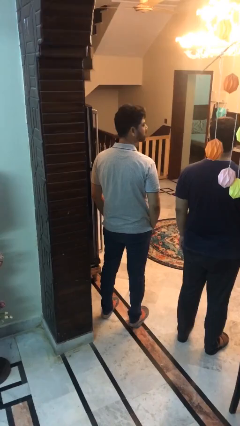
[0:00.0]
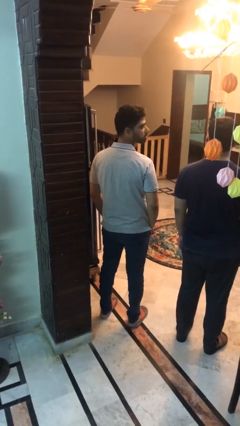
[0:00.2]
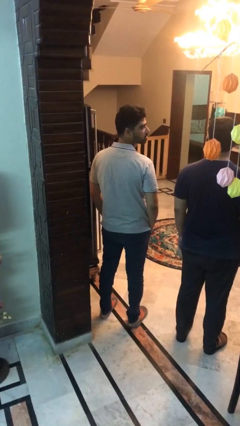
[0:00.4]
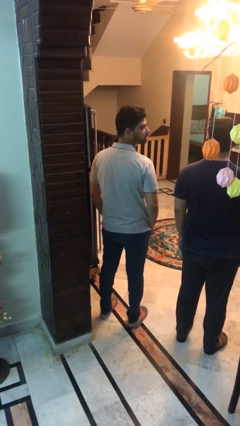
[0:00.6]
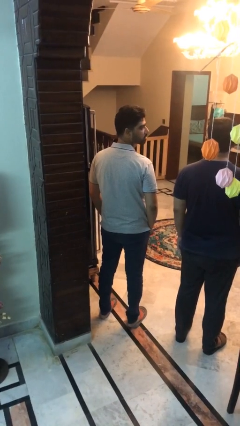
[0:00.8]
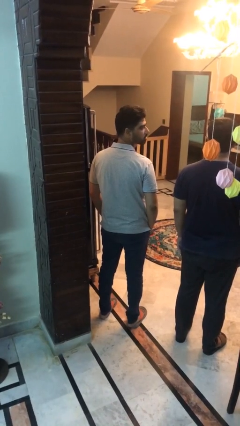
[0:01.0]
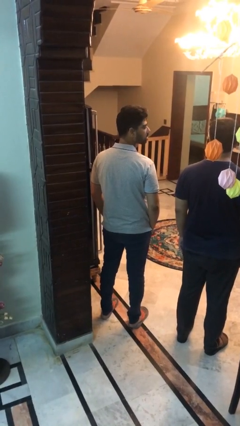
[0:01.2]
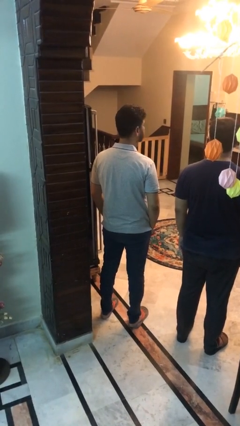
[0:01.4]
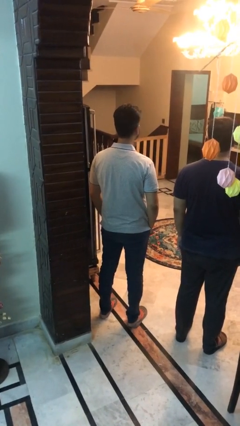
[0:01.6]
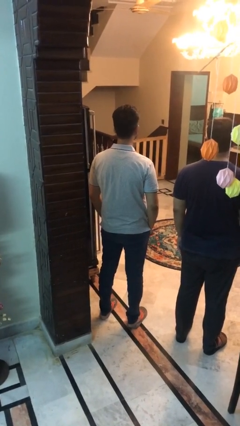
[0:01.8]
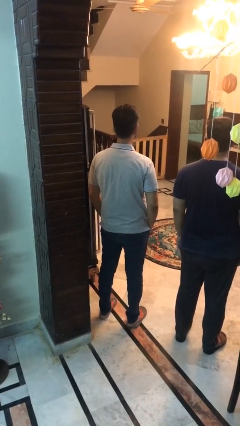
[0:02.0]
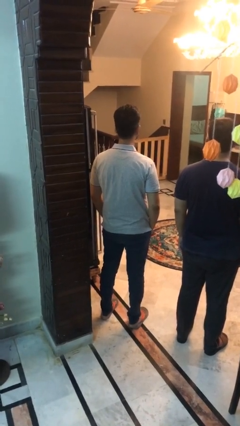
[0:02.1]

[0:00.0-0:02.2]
person looks over shoulder

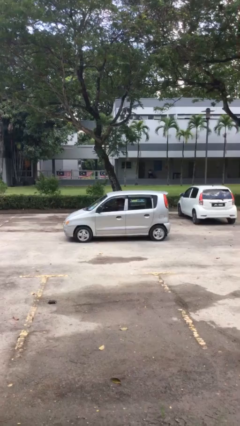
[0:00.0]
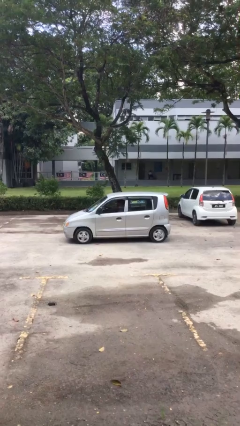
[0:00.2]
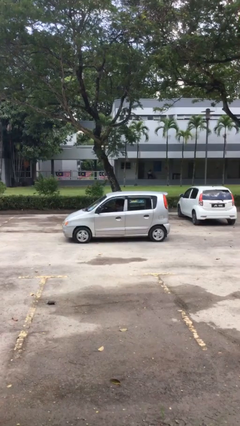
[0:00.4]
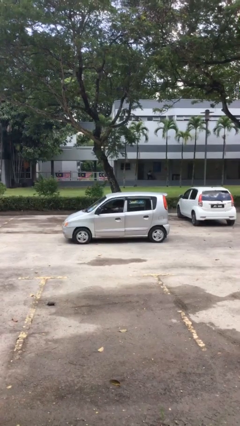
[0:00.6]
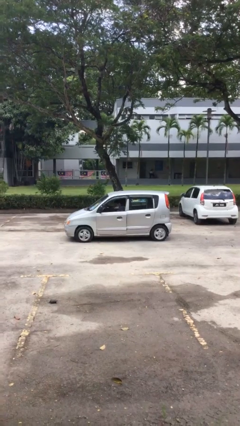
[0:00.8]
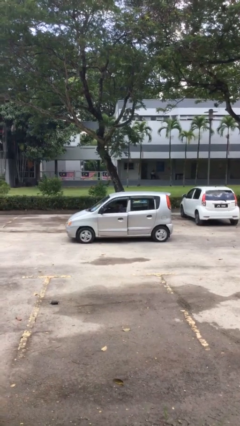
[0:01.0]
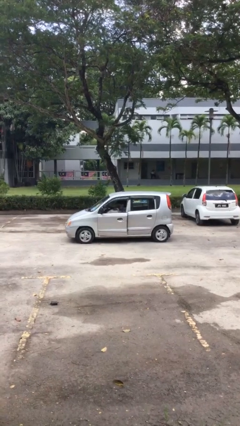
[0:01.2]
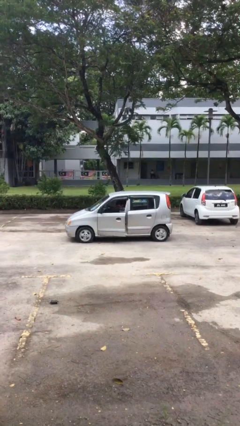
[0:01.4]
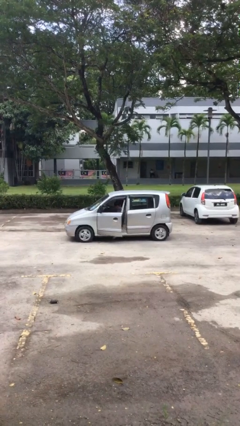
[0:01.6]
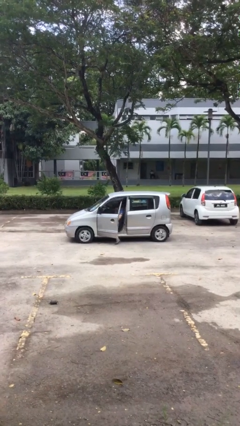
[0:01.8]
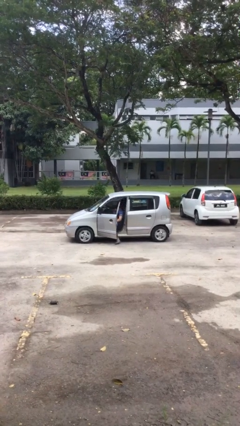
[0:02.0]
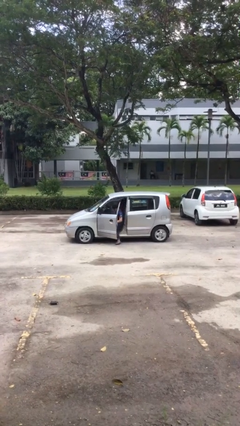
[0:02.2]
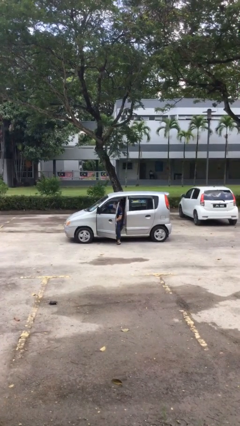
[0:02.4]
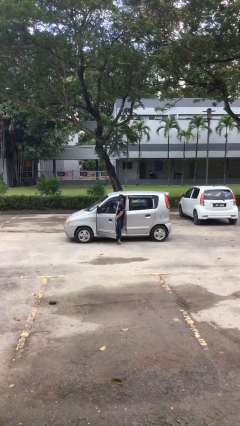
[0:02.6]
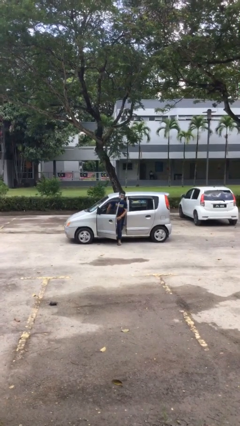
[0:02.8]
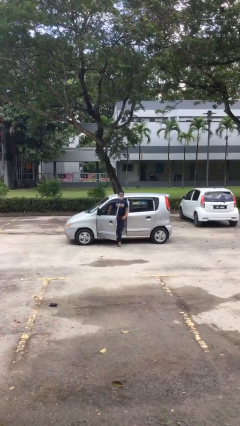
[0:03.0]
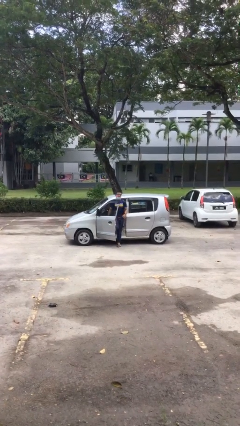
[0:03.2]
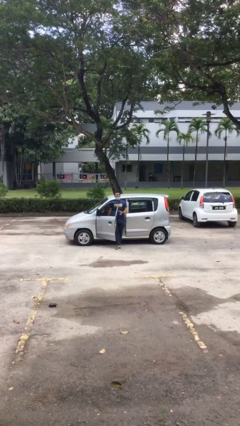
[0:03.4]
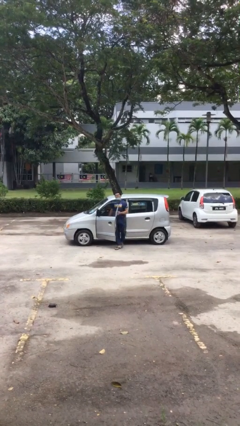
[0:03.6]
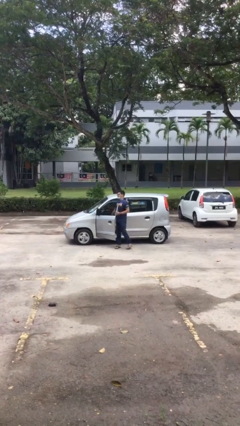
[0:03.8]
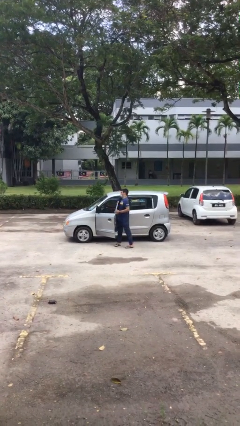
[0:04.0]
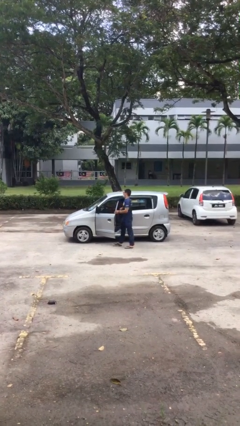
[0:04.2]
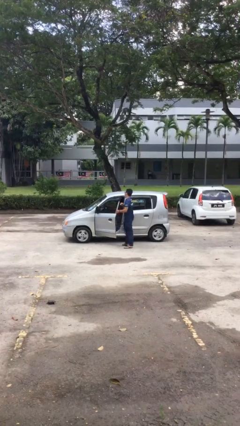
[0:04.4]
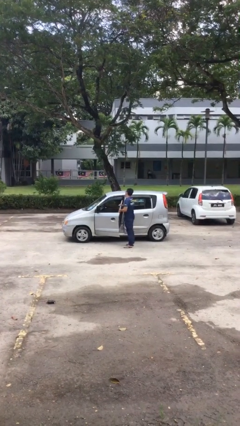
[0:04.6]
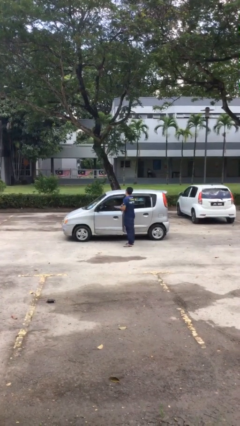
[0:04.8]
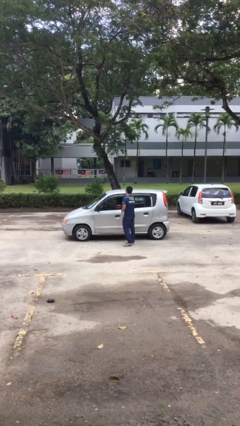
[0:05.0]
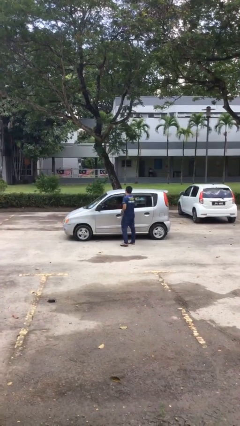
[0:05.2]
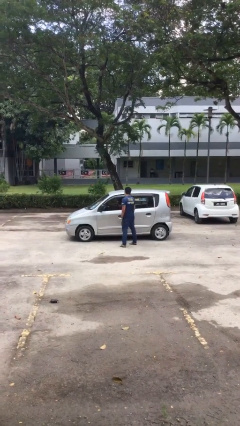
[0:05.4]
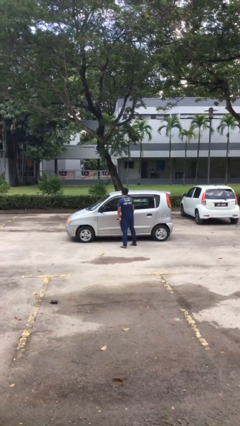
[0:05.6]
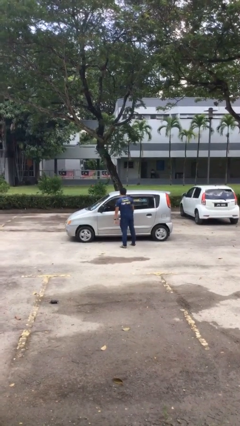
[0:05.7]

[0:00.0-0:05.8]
car drops off person

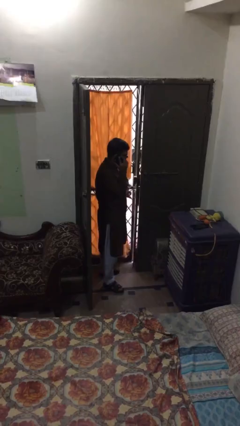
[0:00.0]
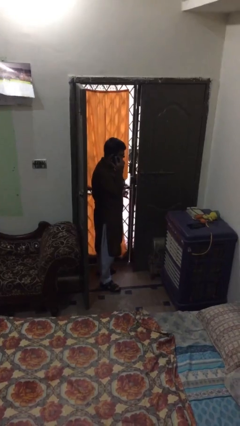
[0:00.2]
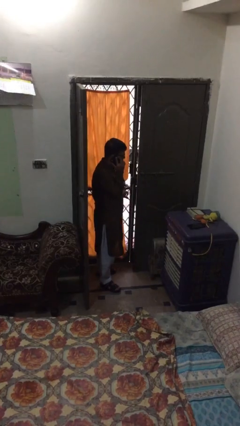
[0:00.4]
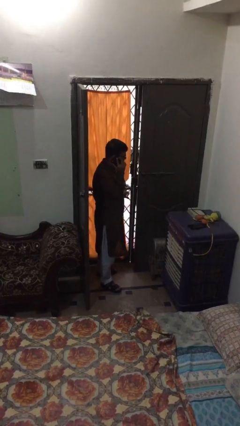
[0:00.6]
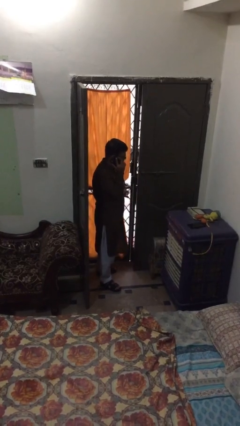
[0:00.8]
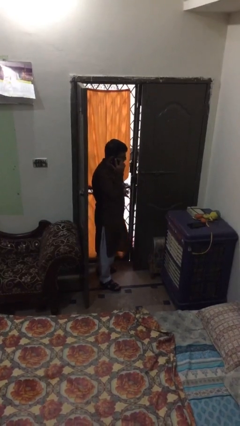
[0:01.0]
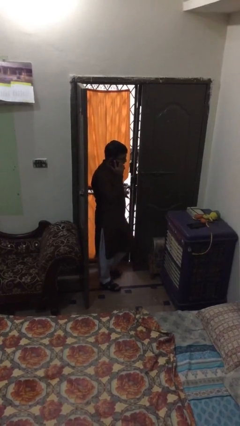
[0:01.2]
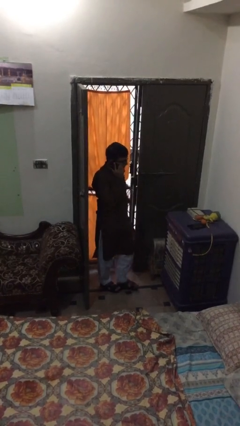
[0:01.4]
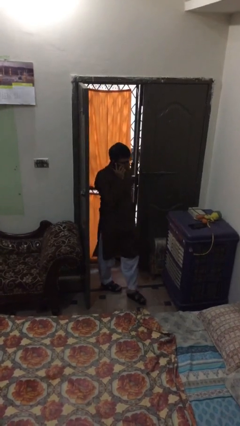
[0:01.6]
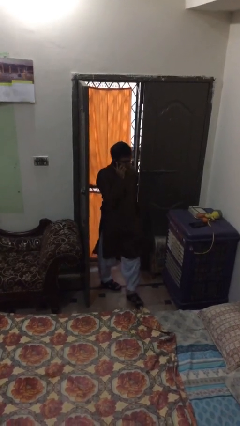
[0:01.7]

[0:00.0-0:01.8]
person closes facility door

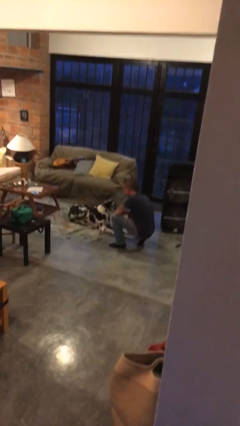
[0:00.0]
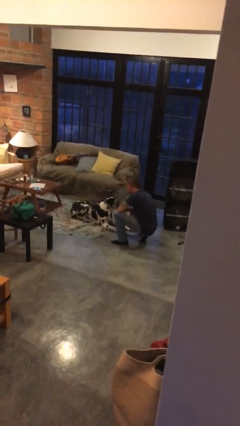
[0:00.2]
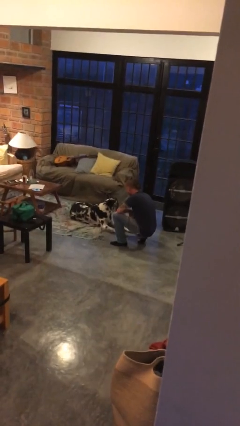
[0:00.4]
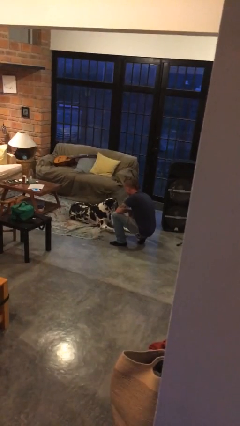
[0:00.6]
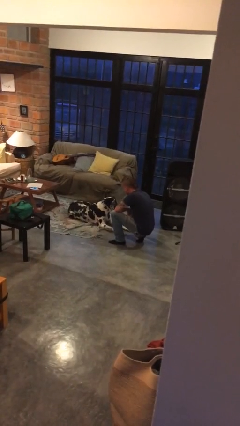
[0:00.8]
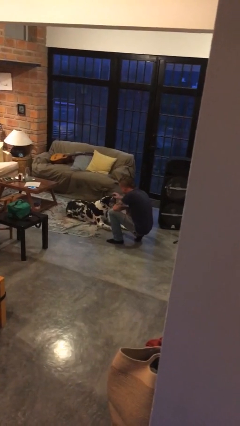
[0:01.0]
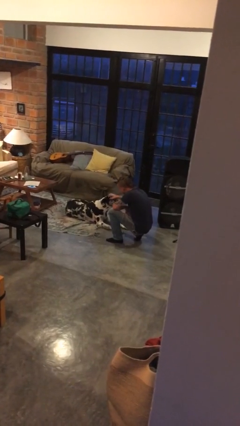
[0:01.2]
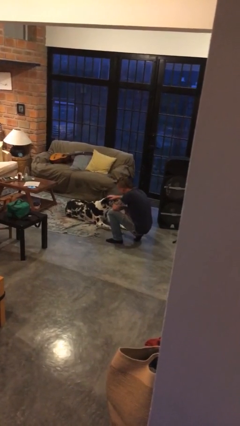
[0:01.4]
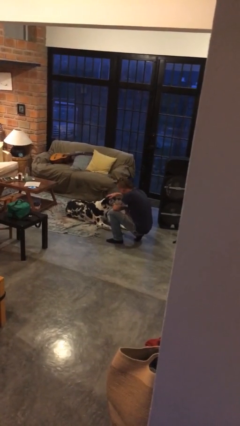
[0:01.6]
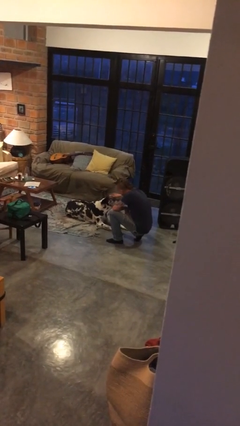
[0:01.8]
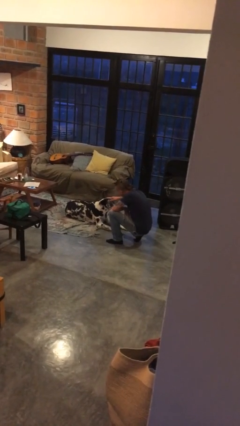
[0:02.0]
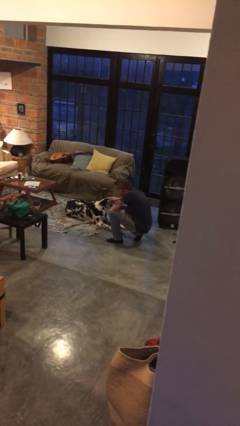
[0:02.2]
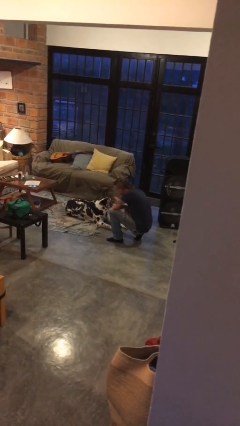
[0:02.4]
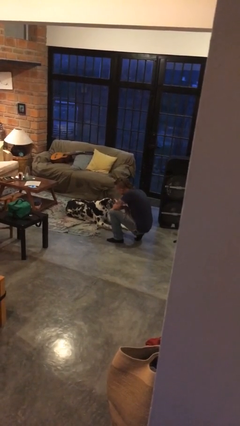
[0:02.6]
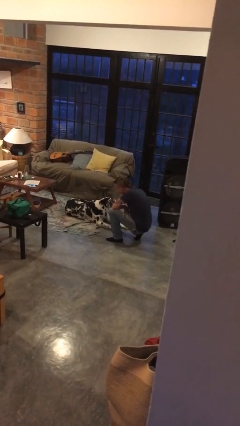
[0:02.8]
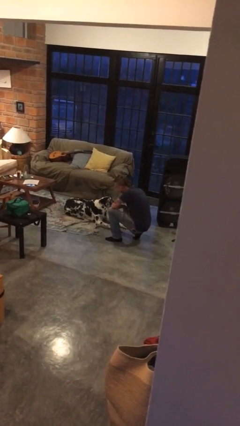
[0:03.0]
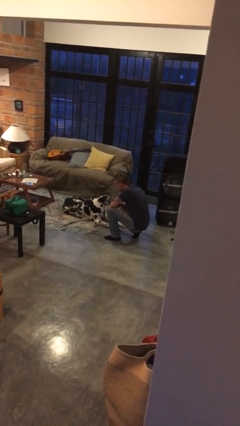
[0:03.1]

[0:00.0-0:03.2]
person pets dog

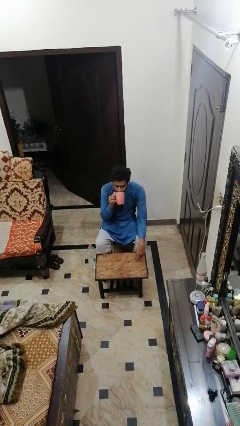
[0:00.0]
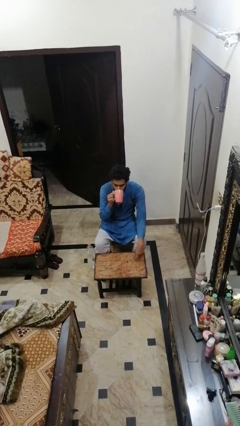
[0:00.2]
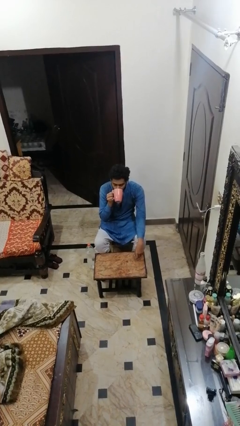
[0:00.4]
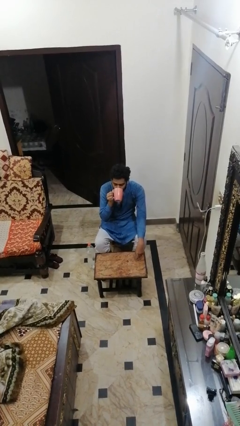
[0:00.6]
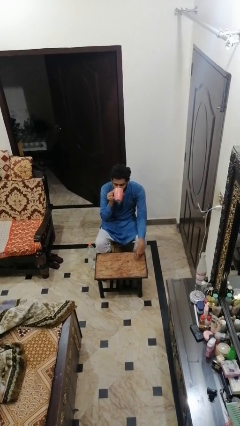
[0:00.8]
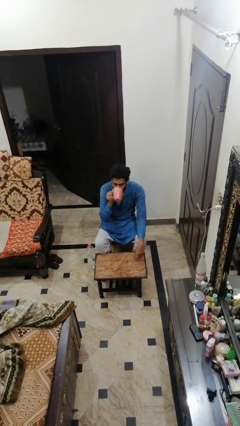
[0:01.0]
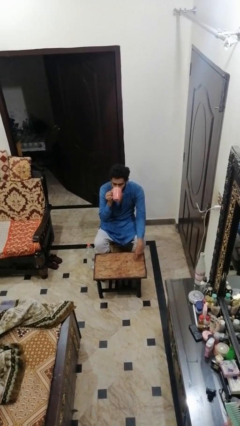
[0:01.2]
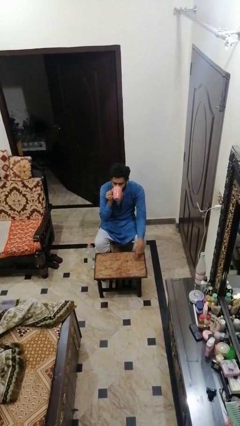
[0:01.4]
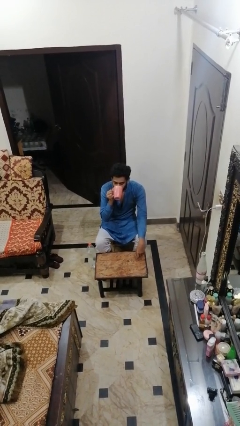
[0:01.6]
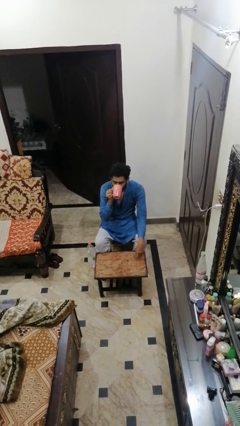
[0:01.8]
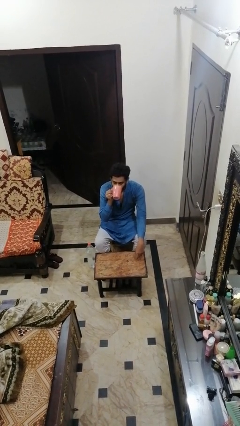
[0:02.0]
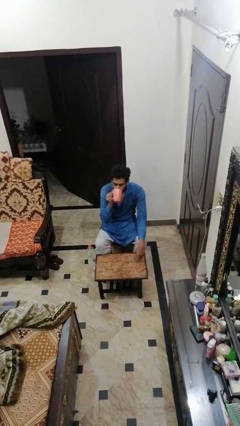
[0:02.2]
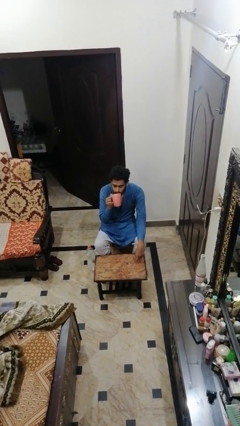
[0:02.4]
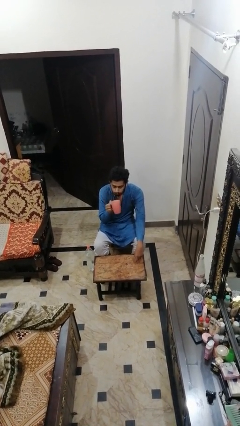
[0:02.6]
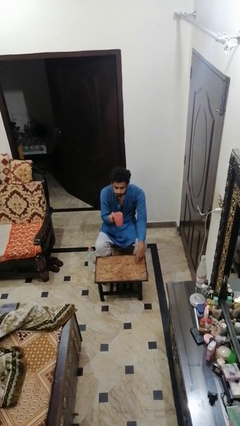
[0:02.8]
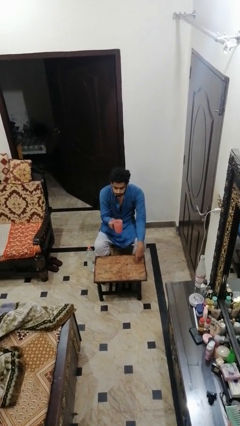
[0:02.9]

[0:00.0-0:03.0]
person drinks from mug
